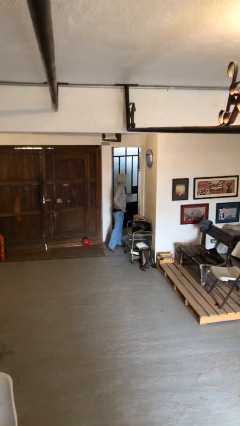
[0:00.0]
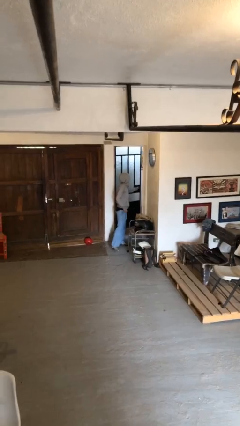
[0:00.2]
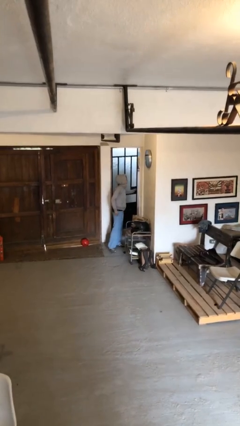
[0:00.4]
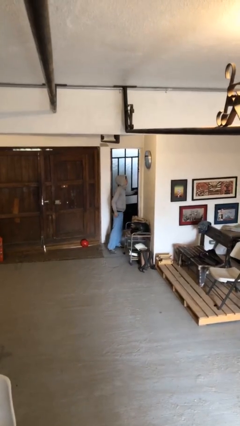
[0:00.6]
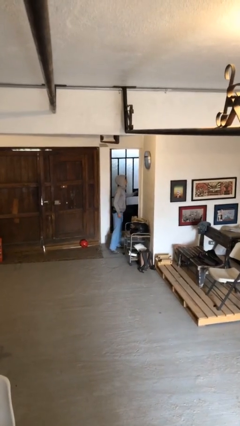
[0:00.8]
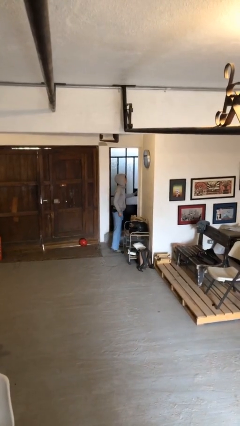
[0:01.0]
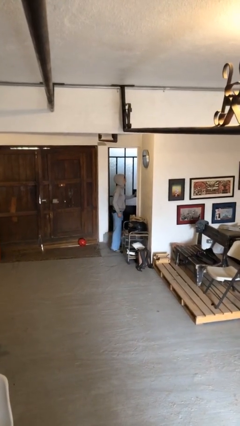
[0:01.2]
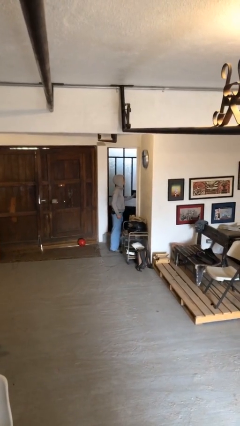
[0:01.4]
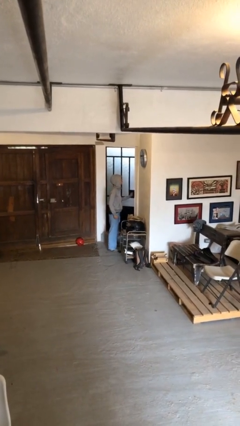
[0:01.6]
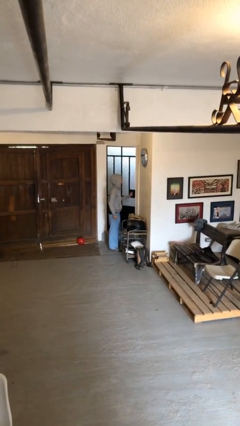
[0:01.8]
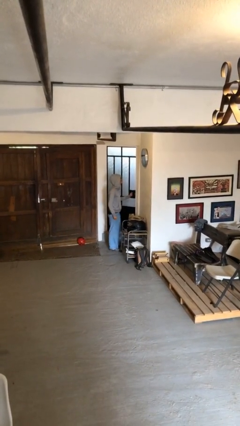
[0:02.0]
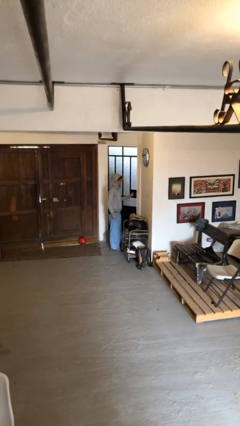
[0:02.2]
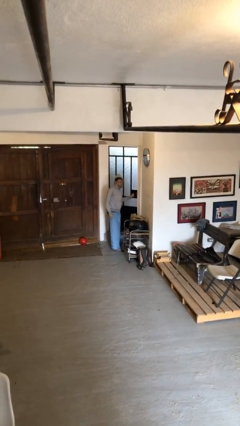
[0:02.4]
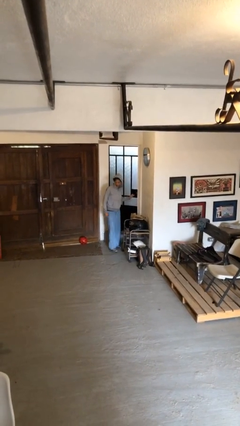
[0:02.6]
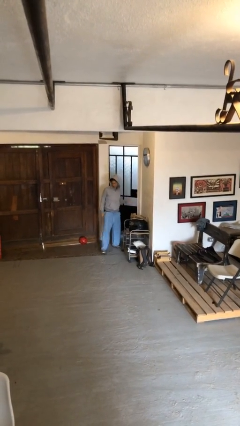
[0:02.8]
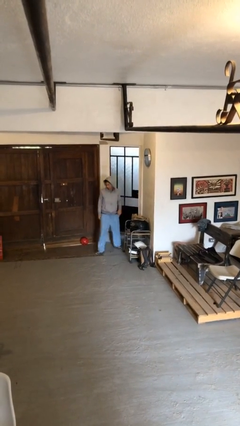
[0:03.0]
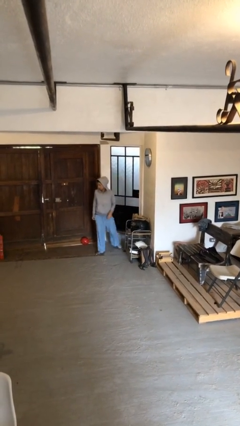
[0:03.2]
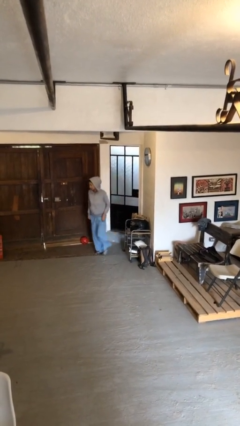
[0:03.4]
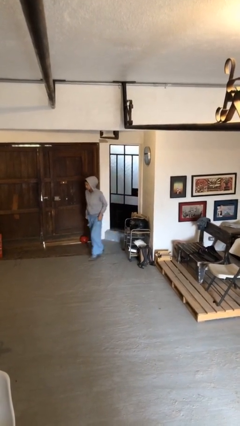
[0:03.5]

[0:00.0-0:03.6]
person closes facility door

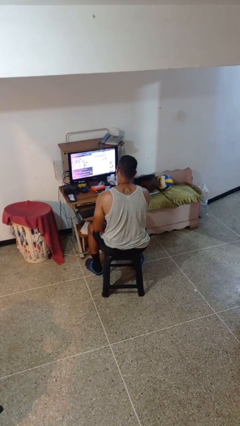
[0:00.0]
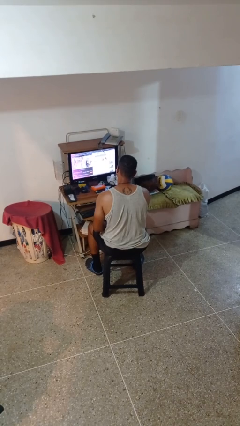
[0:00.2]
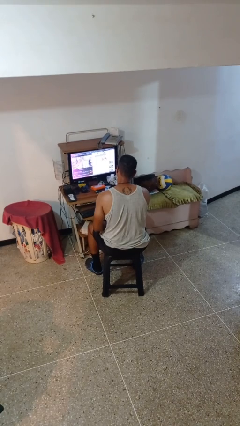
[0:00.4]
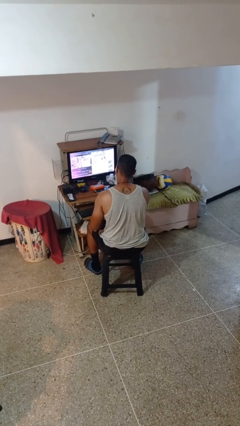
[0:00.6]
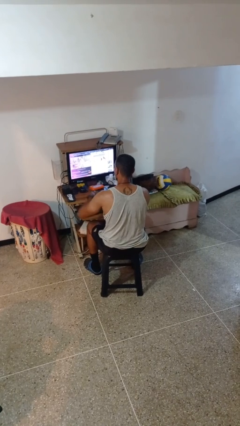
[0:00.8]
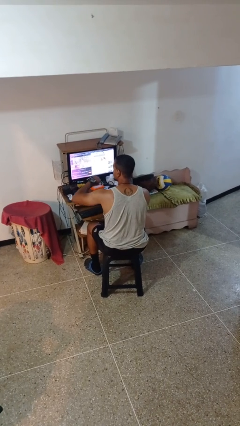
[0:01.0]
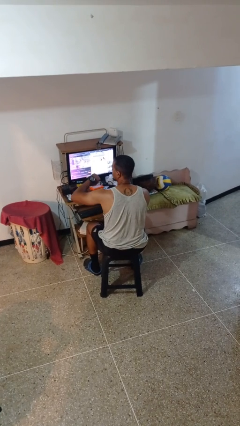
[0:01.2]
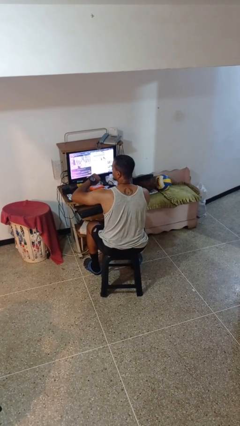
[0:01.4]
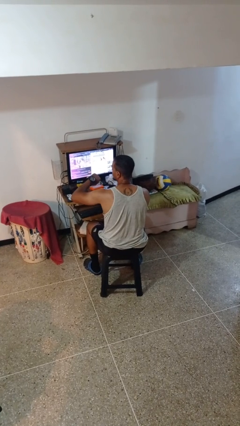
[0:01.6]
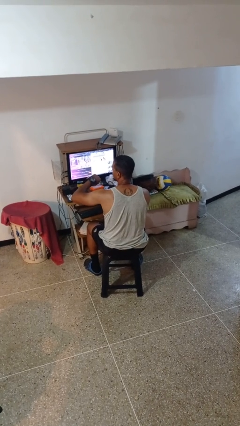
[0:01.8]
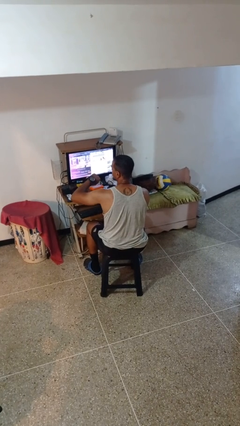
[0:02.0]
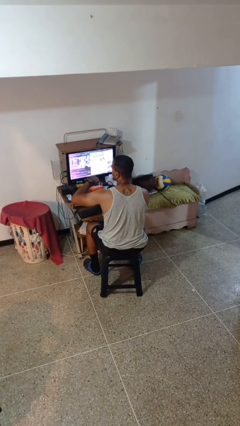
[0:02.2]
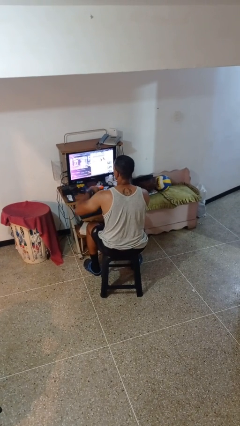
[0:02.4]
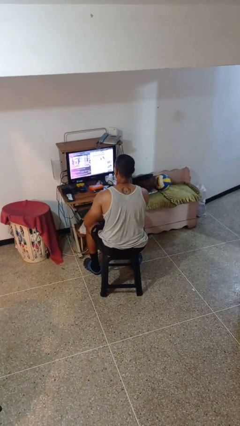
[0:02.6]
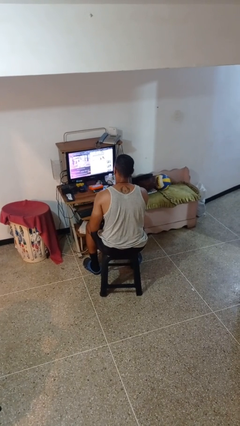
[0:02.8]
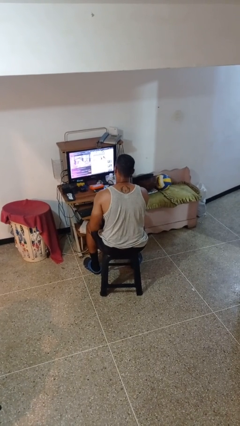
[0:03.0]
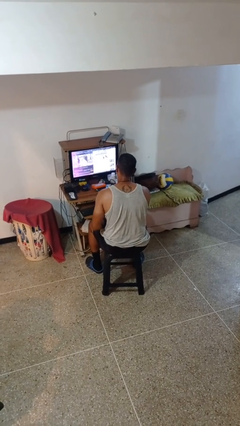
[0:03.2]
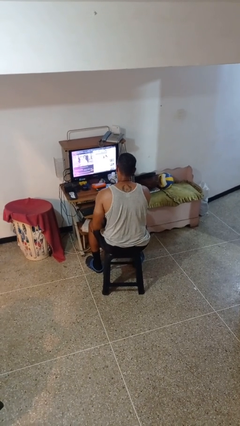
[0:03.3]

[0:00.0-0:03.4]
person looks at wristwatch

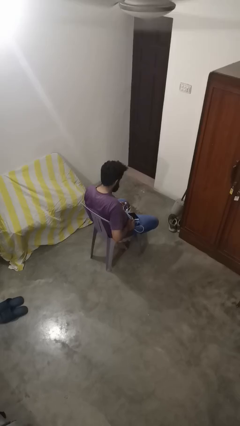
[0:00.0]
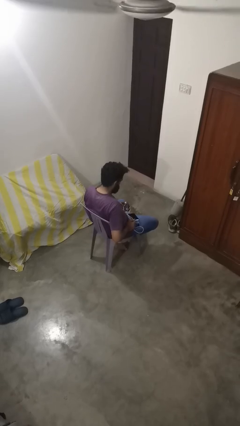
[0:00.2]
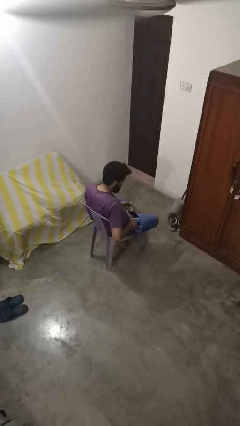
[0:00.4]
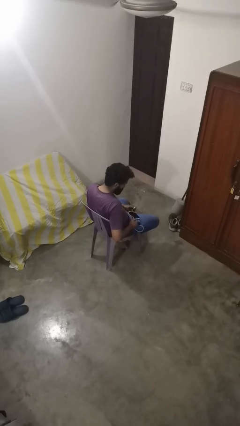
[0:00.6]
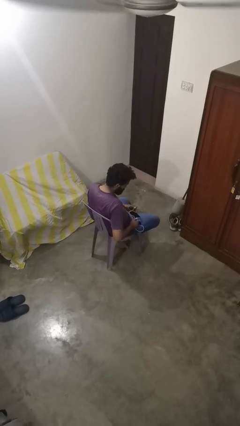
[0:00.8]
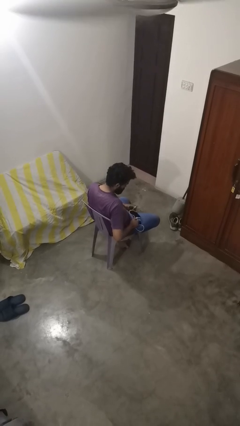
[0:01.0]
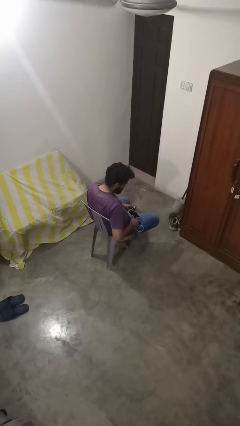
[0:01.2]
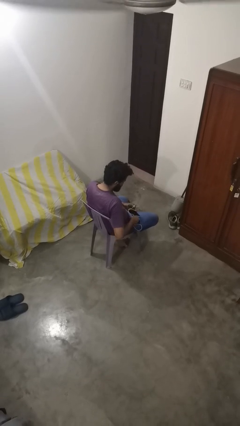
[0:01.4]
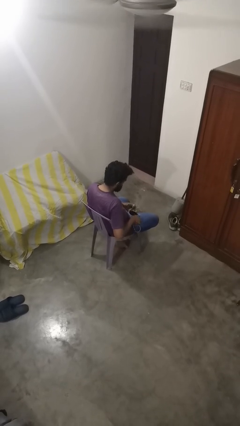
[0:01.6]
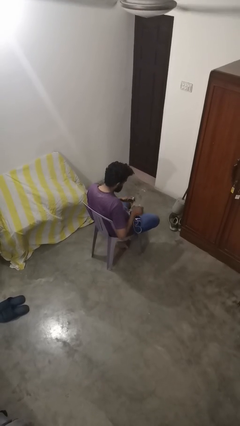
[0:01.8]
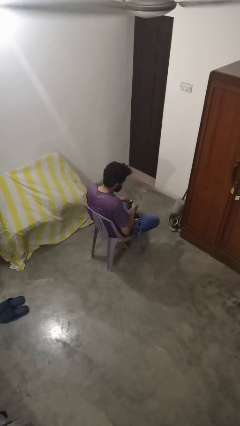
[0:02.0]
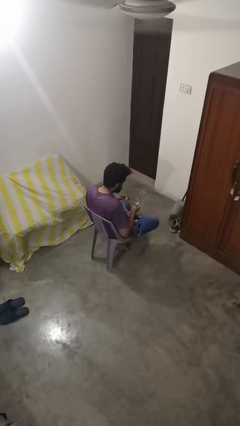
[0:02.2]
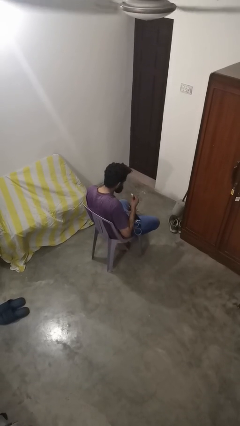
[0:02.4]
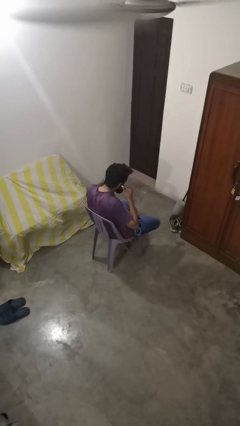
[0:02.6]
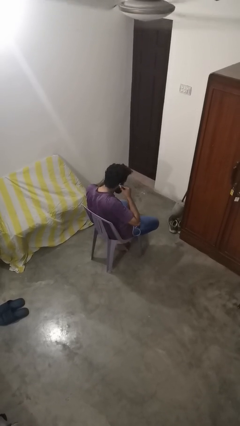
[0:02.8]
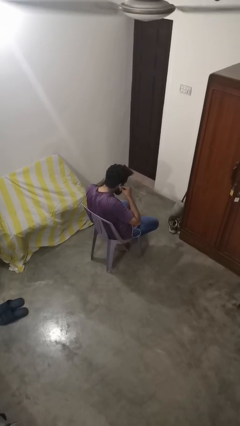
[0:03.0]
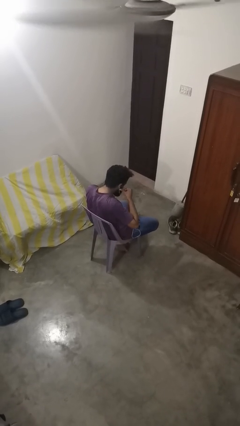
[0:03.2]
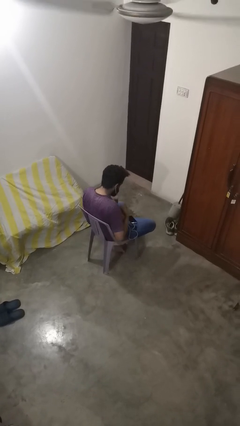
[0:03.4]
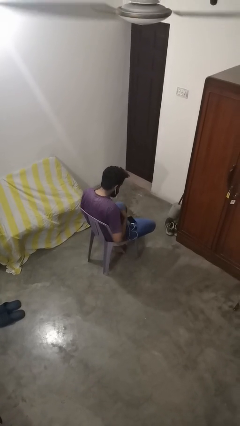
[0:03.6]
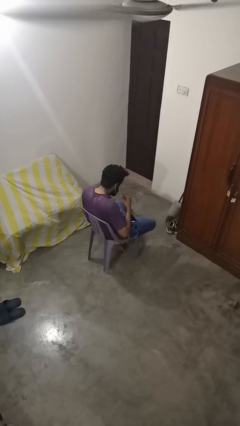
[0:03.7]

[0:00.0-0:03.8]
person puts on headphones

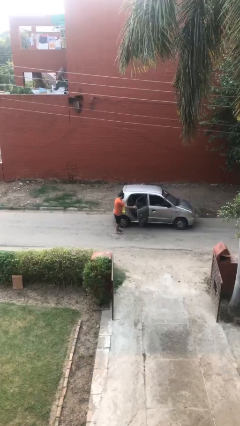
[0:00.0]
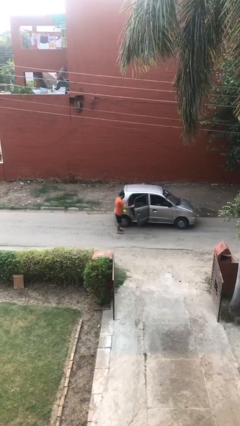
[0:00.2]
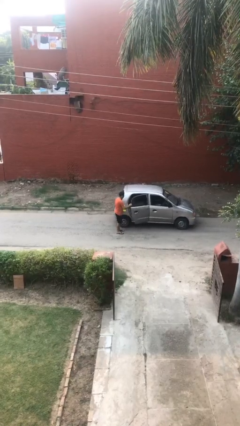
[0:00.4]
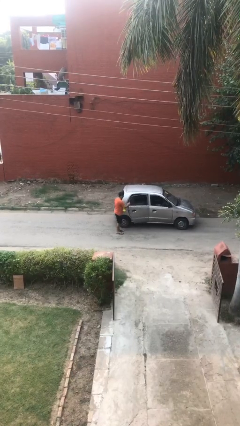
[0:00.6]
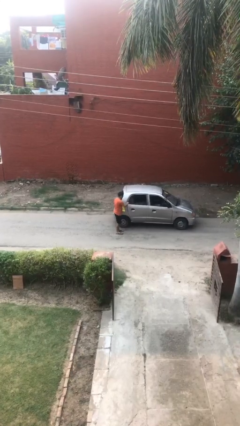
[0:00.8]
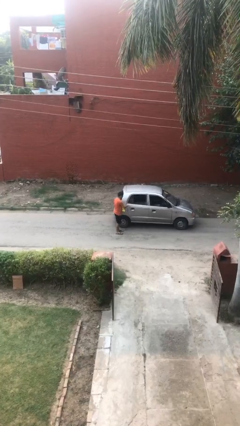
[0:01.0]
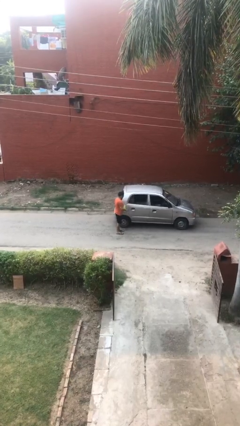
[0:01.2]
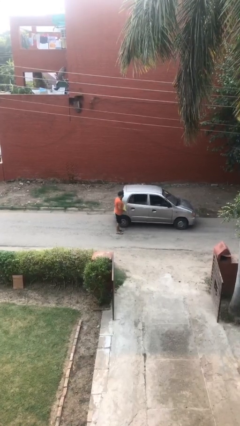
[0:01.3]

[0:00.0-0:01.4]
person closes car door

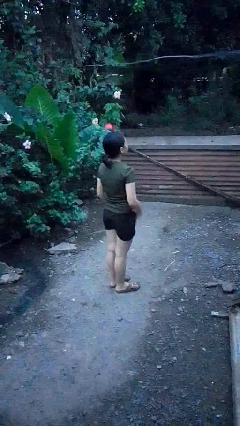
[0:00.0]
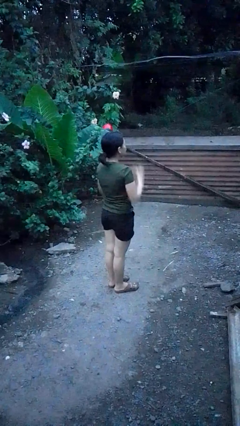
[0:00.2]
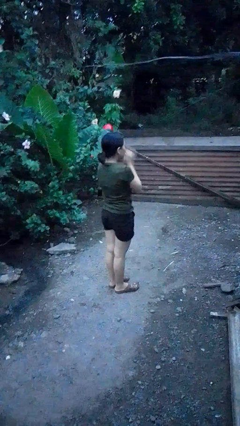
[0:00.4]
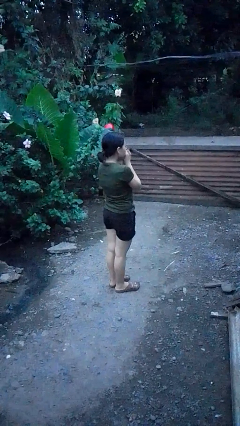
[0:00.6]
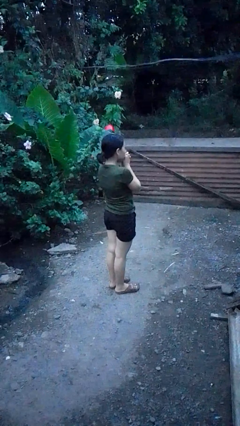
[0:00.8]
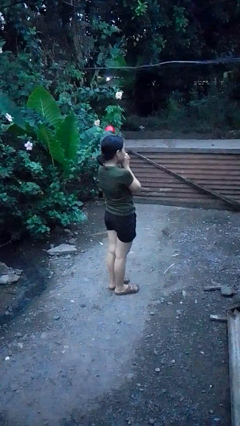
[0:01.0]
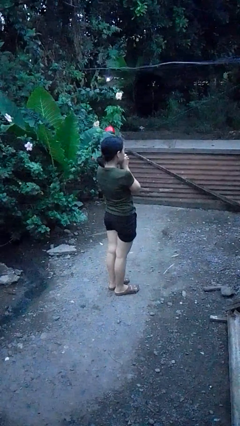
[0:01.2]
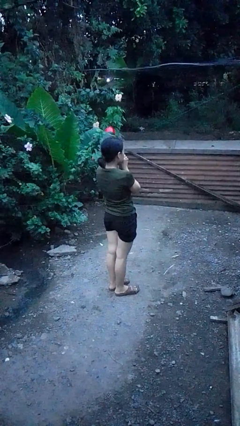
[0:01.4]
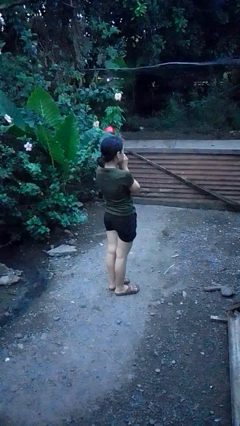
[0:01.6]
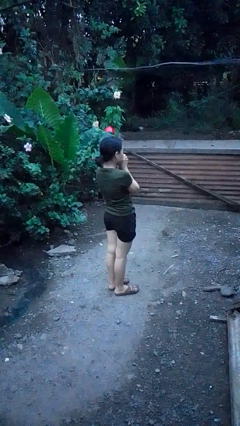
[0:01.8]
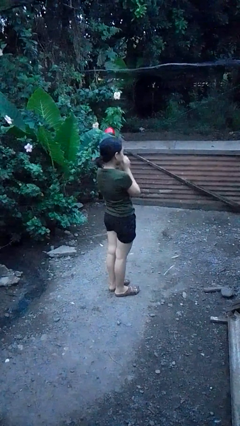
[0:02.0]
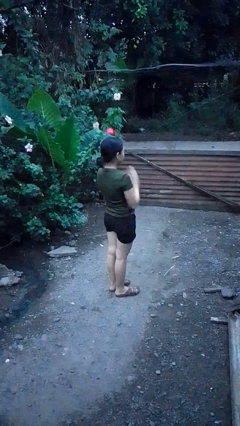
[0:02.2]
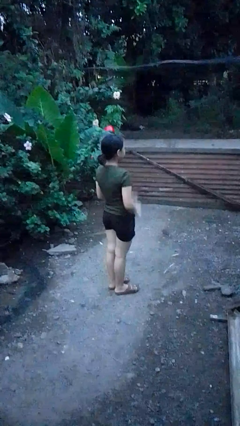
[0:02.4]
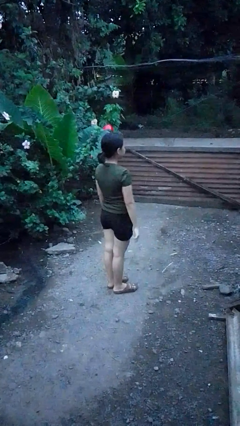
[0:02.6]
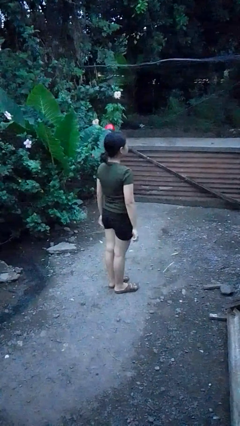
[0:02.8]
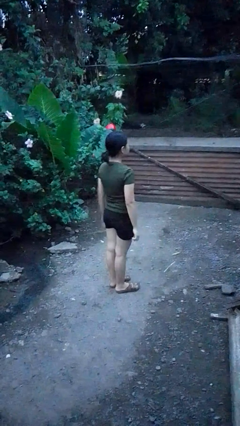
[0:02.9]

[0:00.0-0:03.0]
person blows into hands

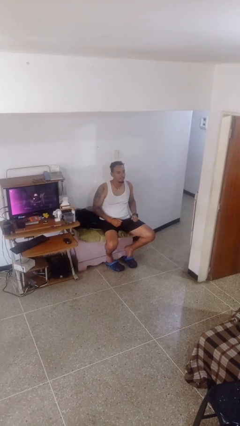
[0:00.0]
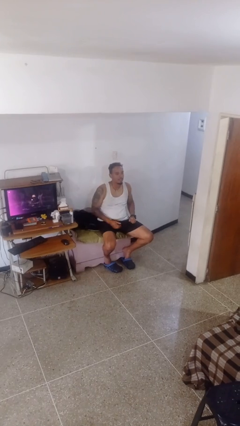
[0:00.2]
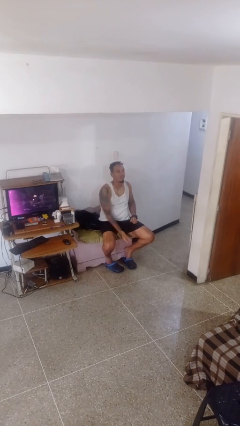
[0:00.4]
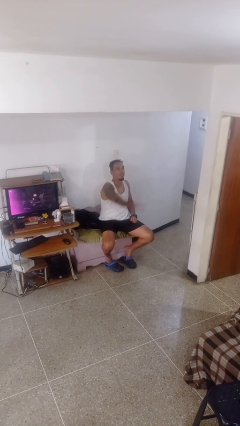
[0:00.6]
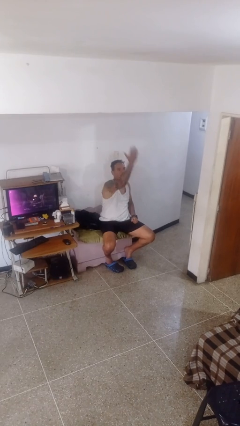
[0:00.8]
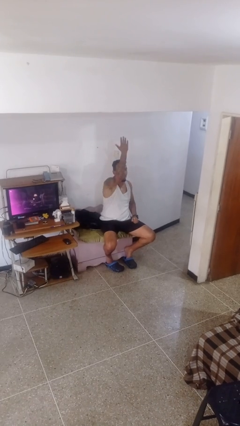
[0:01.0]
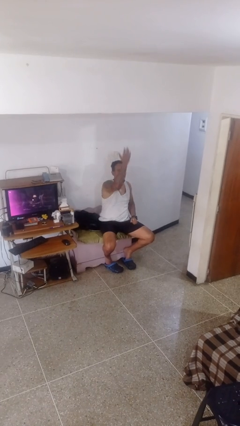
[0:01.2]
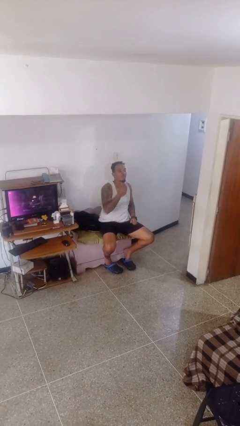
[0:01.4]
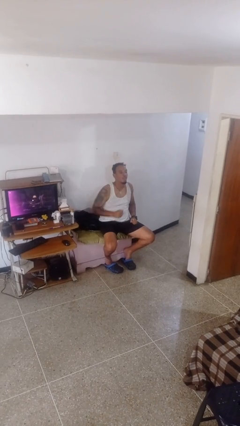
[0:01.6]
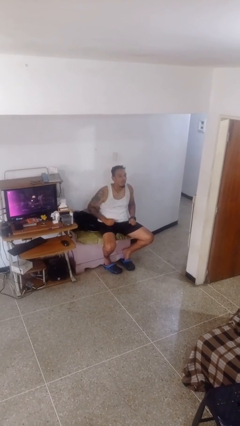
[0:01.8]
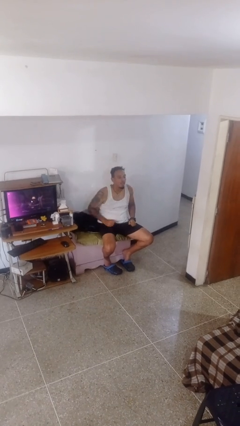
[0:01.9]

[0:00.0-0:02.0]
person gestures swipe up
